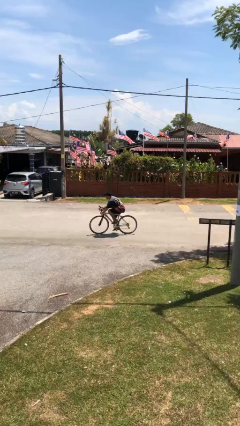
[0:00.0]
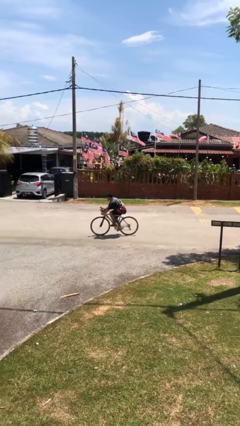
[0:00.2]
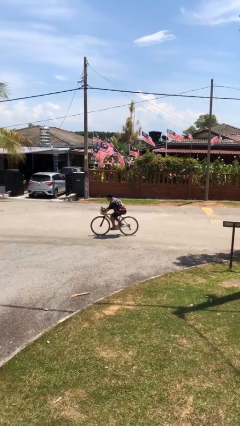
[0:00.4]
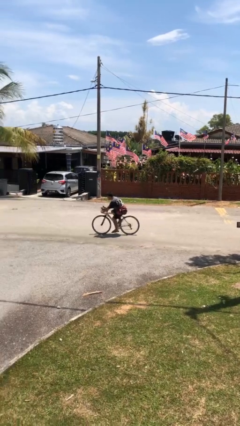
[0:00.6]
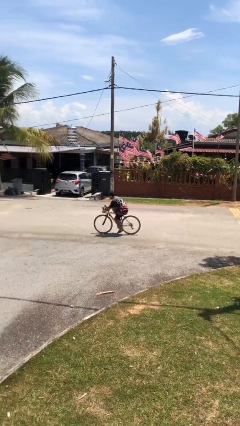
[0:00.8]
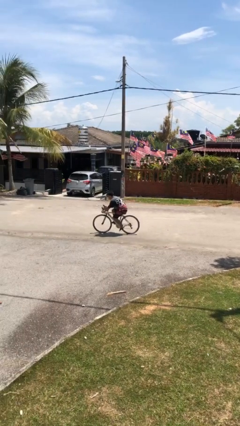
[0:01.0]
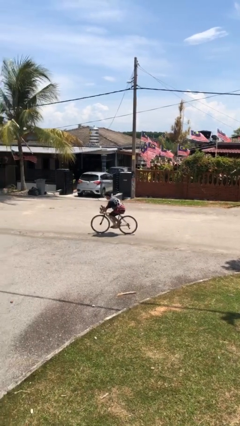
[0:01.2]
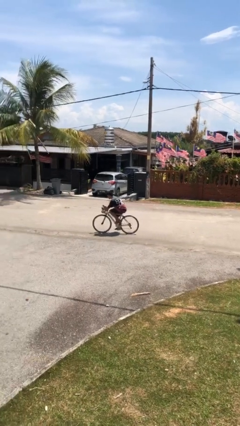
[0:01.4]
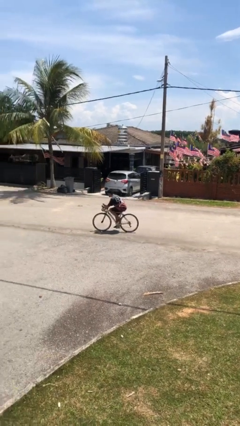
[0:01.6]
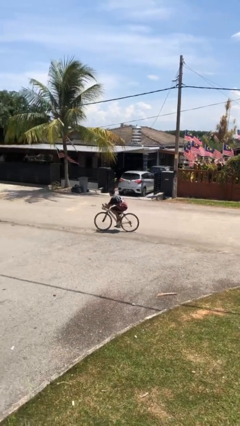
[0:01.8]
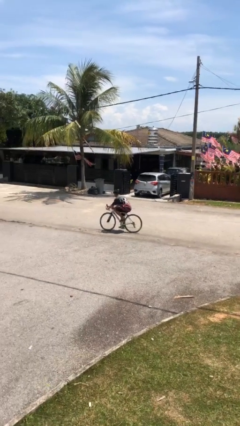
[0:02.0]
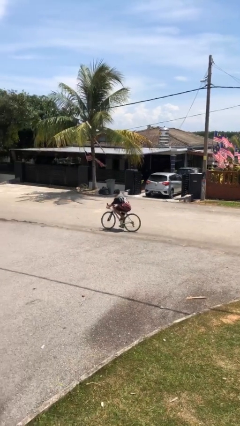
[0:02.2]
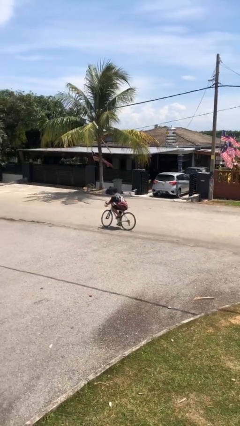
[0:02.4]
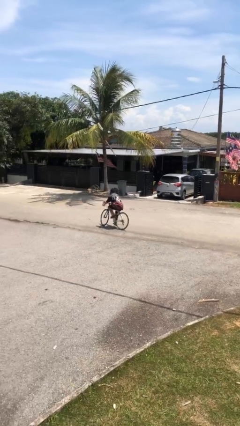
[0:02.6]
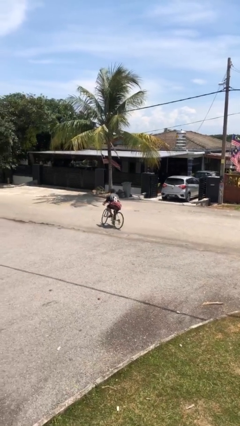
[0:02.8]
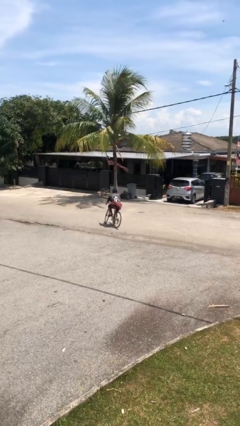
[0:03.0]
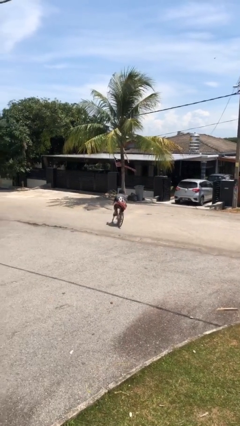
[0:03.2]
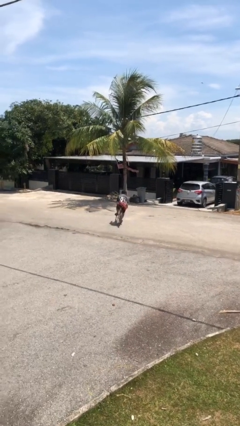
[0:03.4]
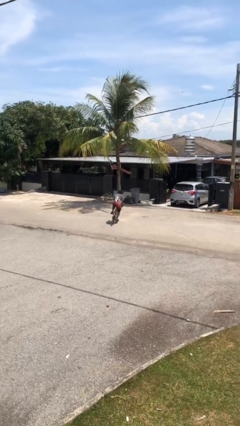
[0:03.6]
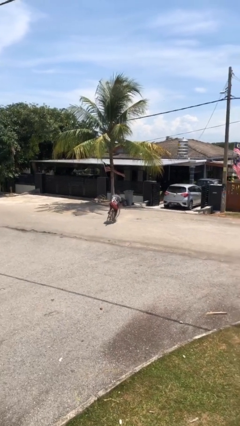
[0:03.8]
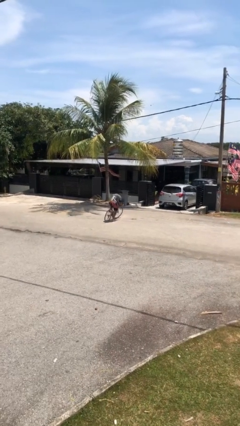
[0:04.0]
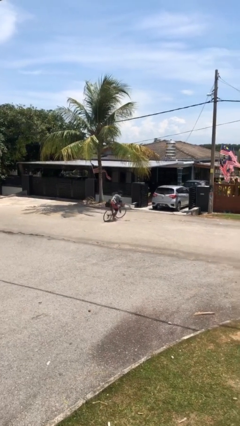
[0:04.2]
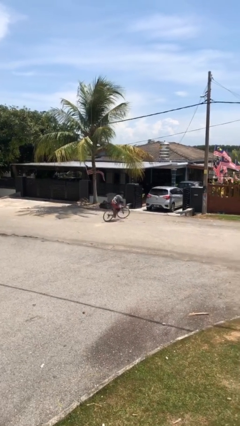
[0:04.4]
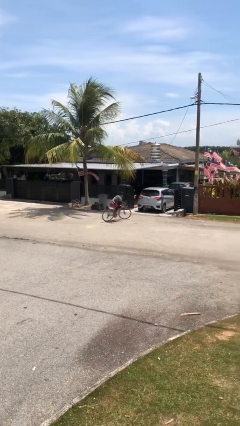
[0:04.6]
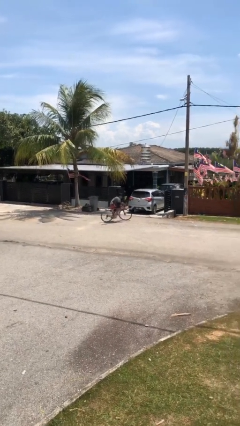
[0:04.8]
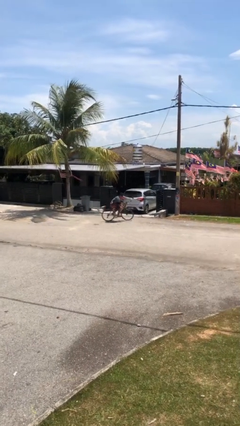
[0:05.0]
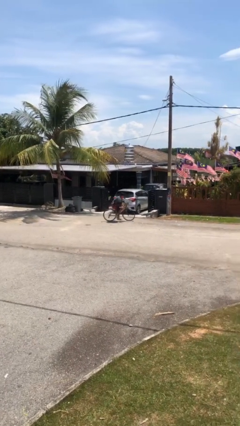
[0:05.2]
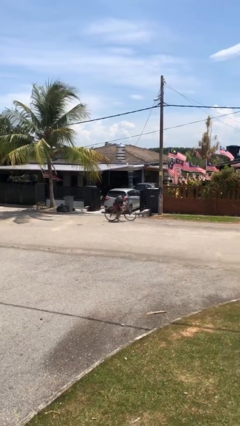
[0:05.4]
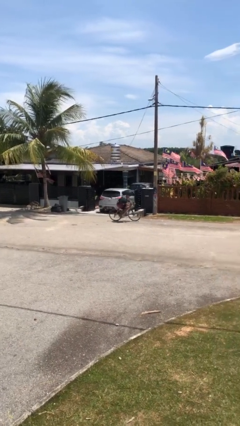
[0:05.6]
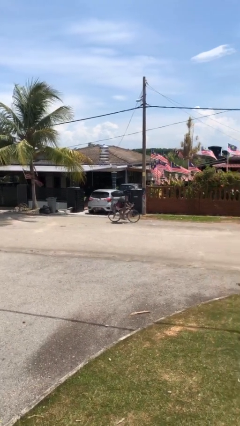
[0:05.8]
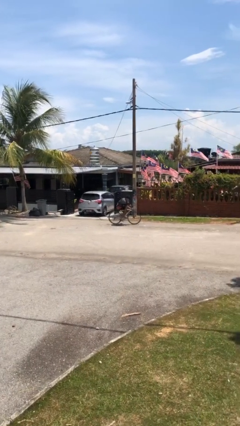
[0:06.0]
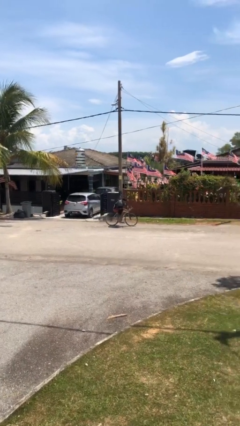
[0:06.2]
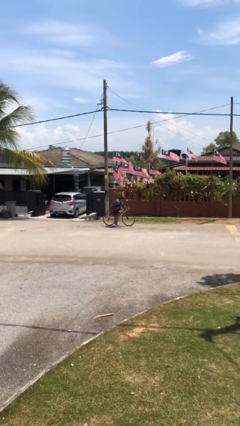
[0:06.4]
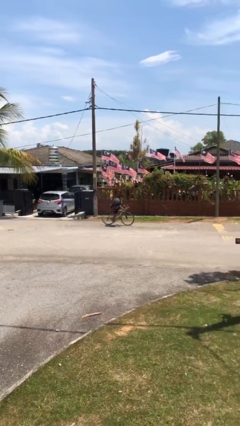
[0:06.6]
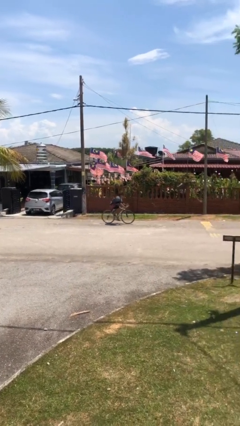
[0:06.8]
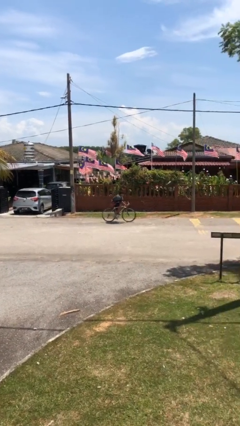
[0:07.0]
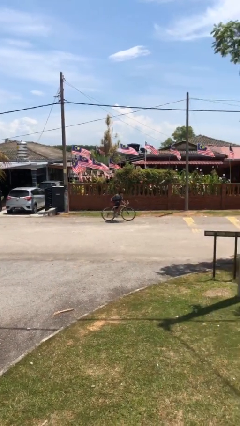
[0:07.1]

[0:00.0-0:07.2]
person rides bicycle

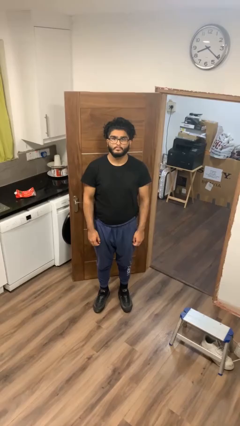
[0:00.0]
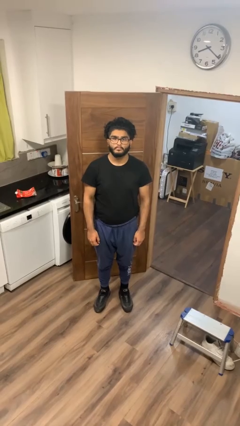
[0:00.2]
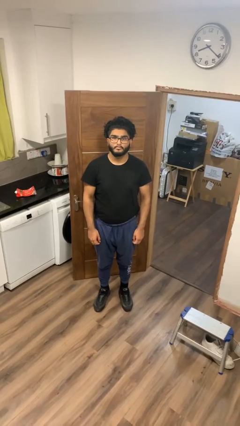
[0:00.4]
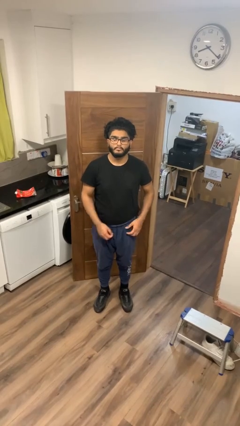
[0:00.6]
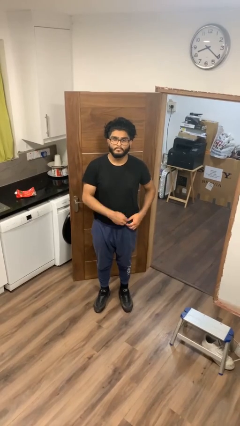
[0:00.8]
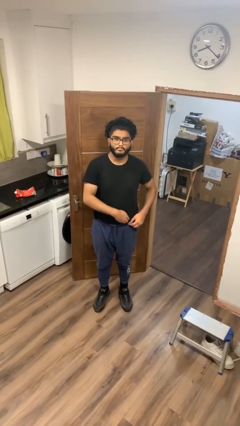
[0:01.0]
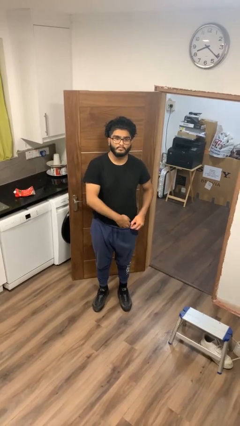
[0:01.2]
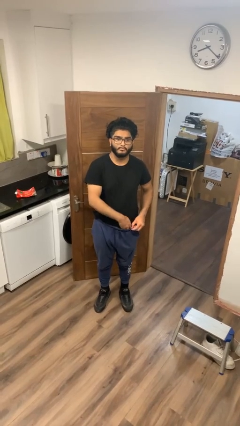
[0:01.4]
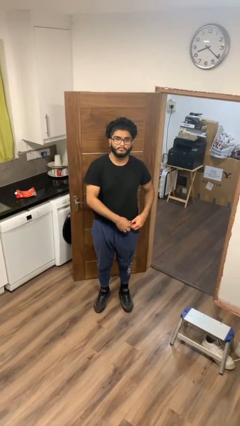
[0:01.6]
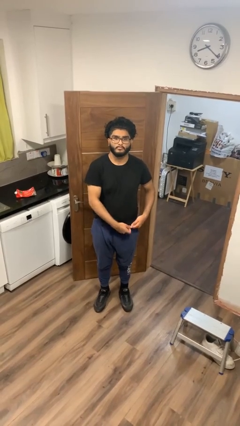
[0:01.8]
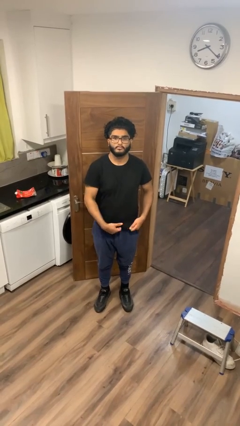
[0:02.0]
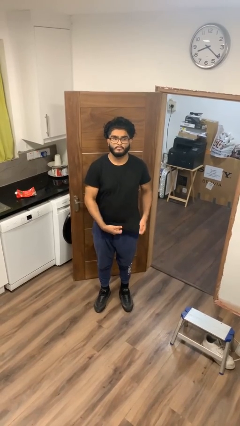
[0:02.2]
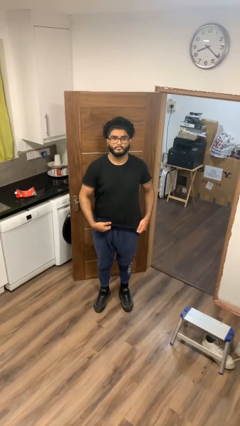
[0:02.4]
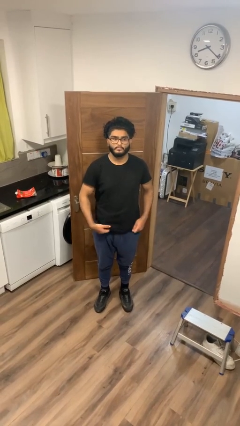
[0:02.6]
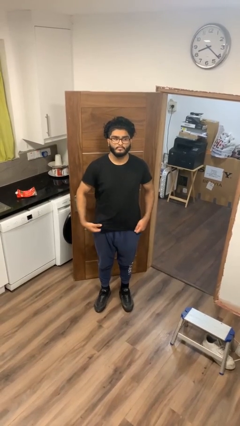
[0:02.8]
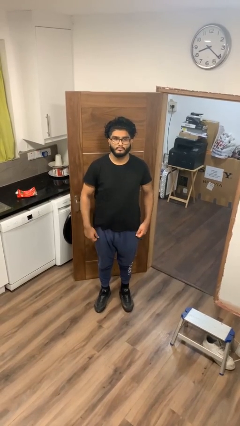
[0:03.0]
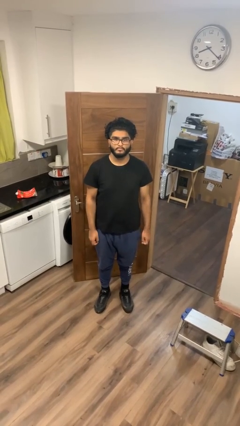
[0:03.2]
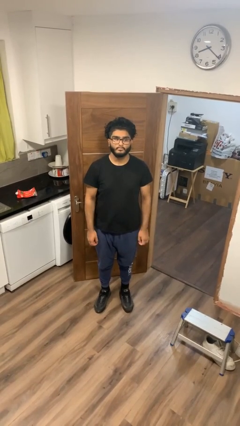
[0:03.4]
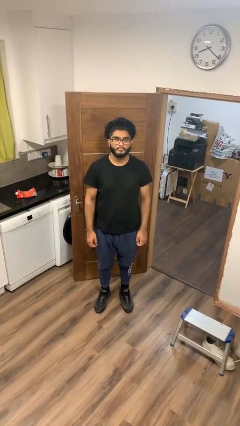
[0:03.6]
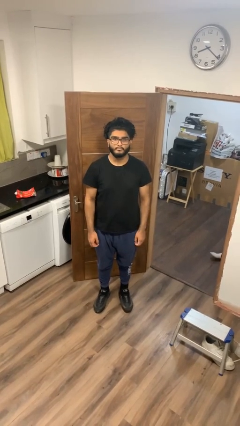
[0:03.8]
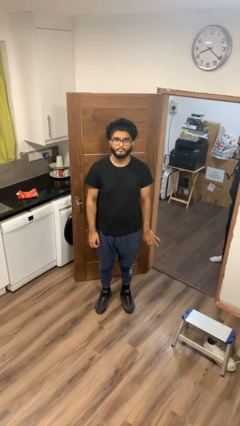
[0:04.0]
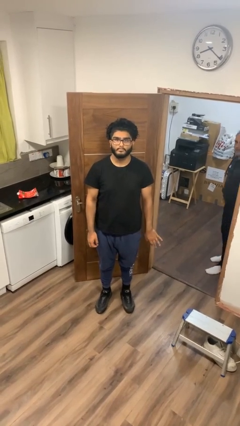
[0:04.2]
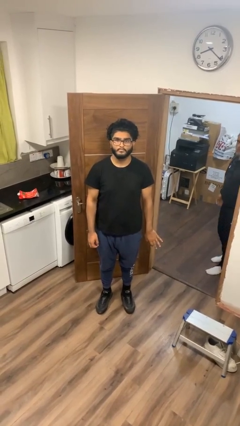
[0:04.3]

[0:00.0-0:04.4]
person untucks shirt

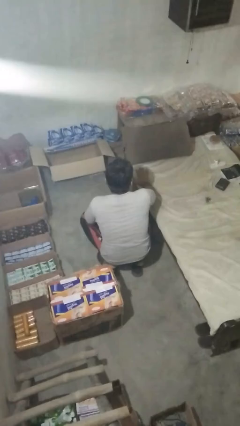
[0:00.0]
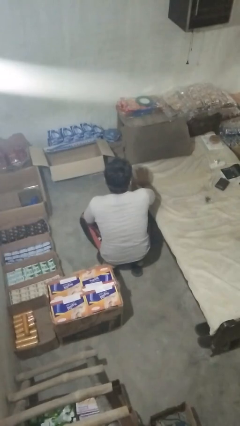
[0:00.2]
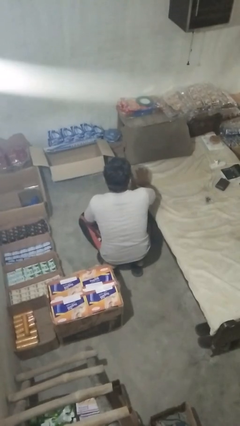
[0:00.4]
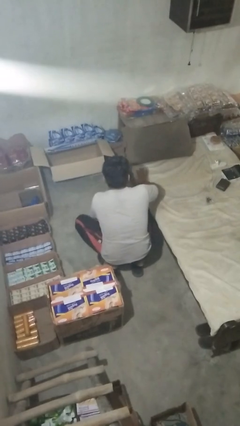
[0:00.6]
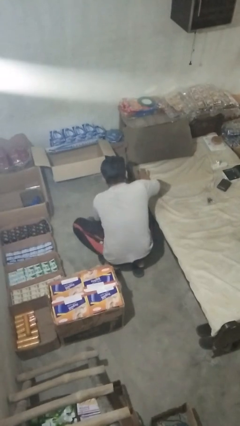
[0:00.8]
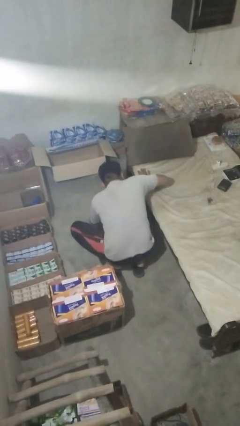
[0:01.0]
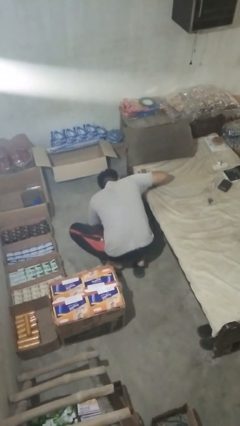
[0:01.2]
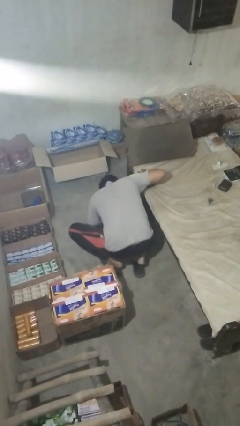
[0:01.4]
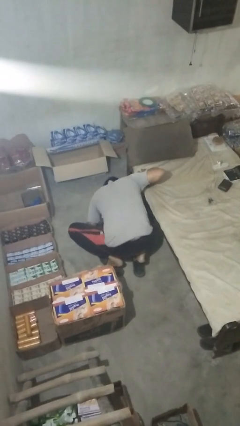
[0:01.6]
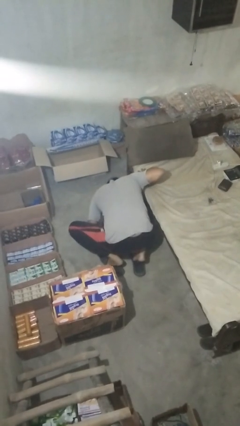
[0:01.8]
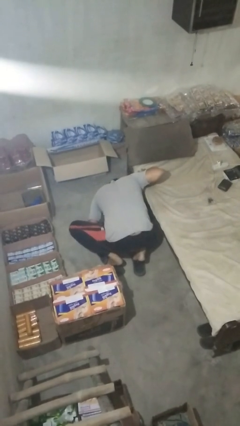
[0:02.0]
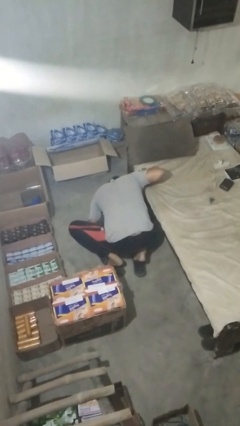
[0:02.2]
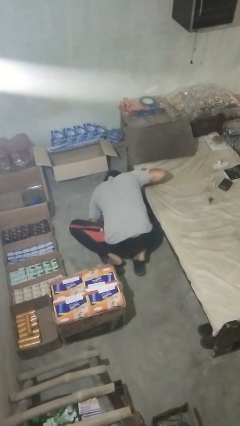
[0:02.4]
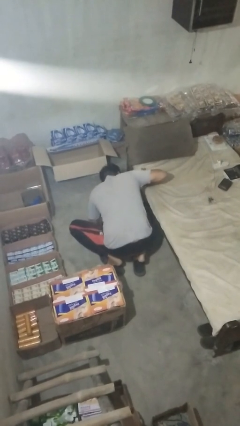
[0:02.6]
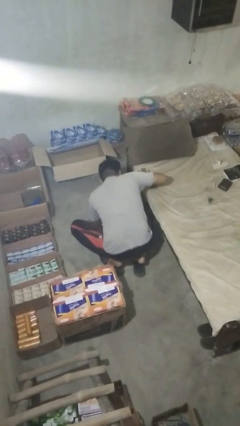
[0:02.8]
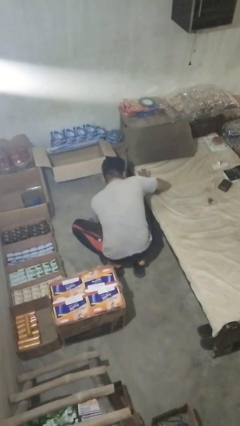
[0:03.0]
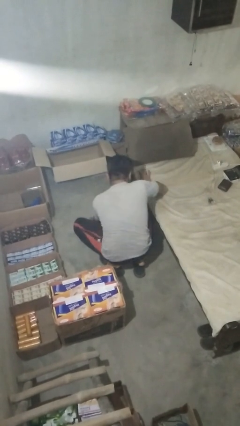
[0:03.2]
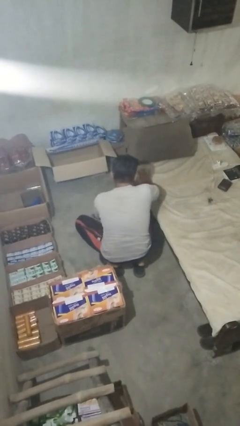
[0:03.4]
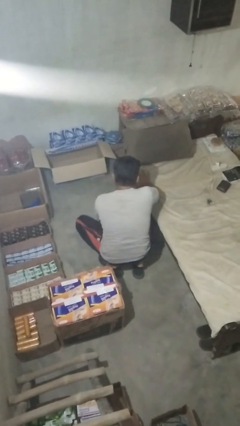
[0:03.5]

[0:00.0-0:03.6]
person searches under bed

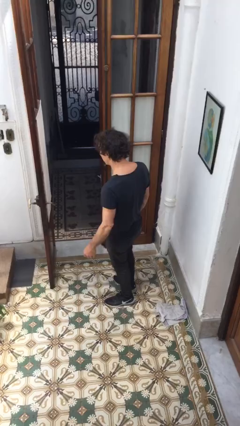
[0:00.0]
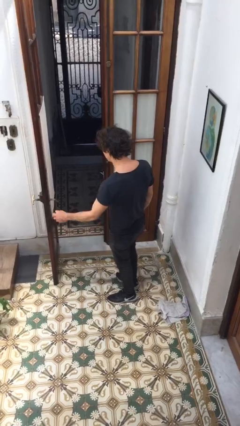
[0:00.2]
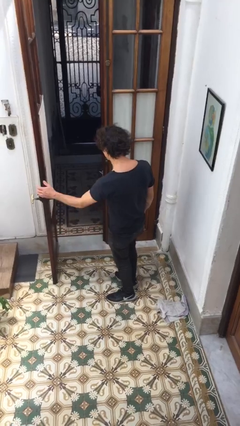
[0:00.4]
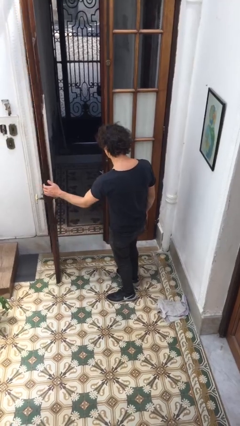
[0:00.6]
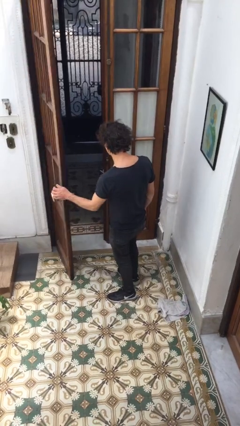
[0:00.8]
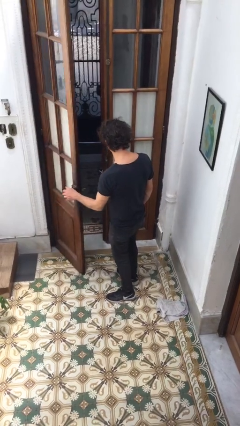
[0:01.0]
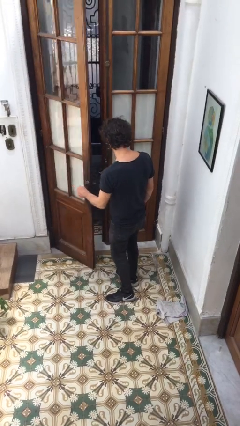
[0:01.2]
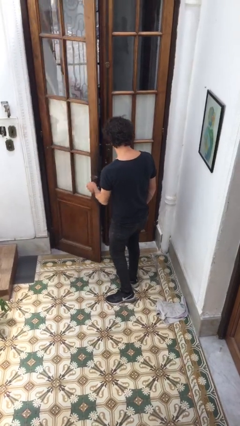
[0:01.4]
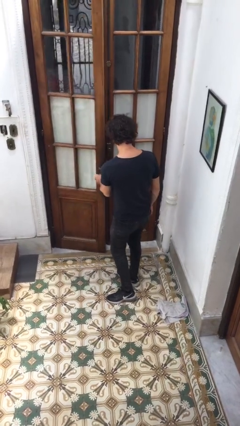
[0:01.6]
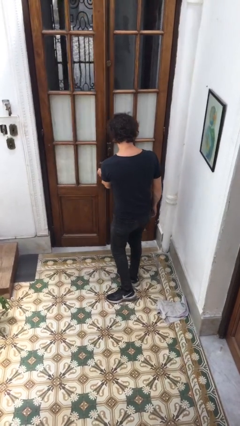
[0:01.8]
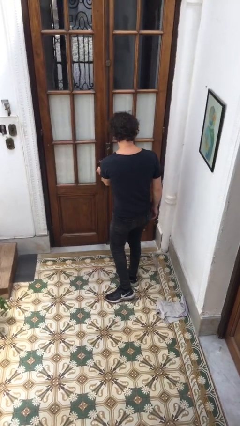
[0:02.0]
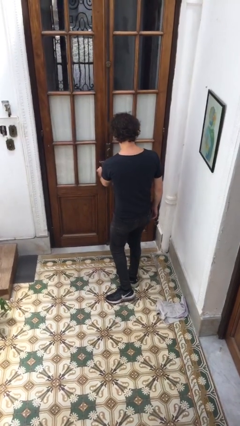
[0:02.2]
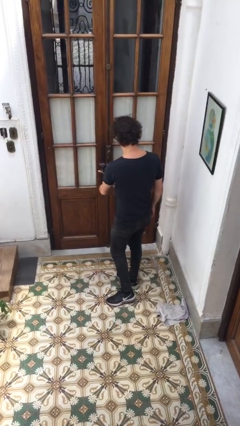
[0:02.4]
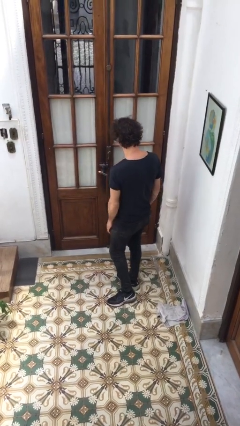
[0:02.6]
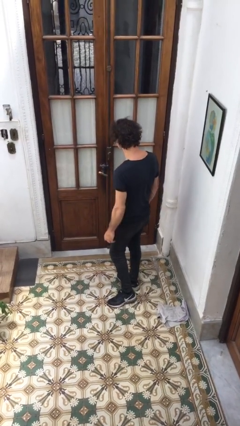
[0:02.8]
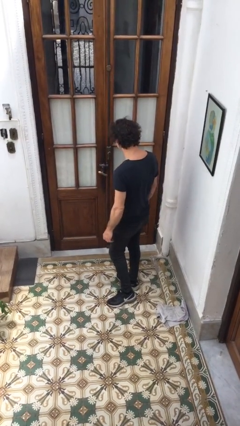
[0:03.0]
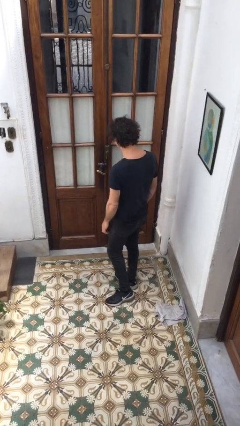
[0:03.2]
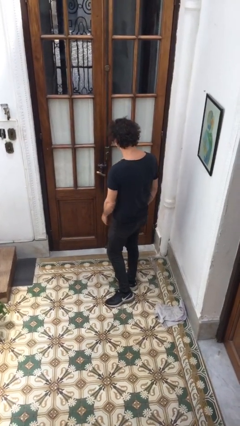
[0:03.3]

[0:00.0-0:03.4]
person closes facility door
